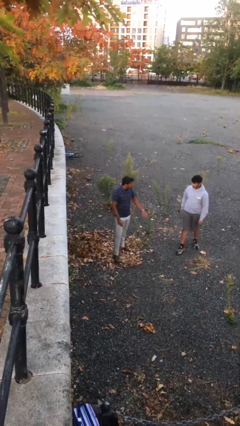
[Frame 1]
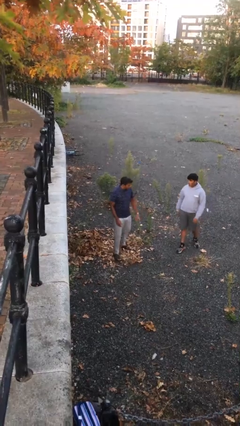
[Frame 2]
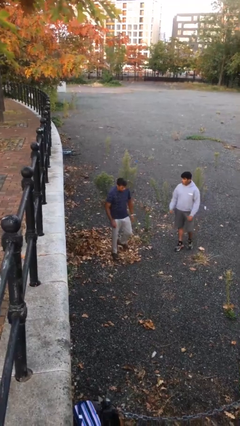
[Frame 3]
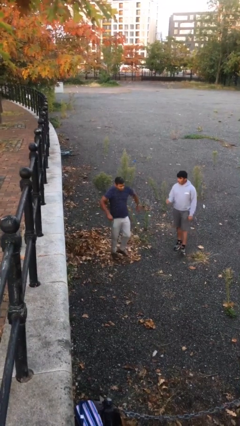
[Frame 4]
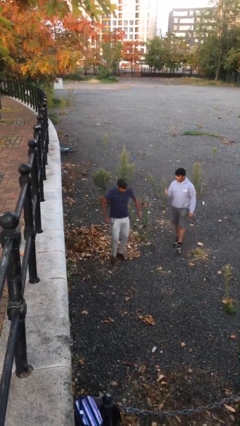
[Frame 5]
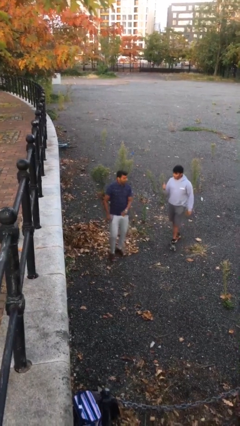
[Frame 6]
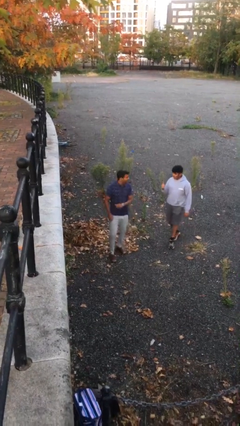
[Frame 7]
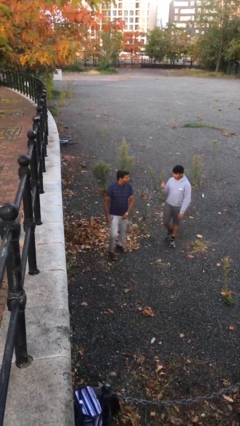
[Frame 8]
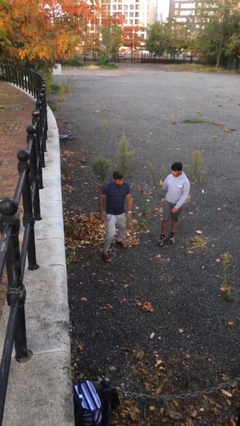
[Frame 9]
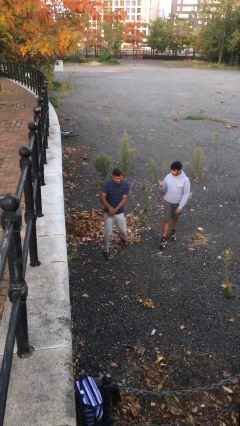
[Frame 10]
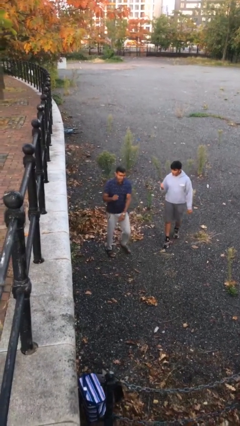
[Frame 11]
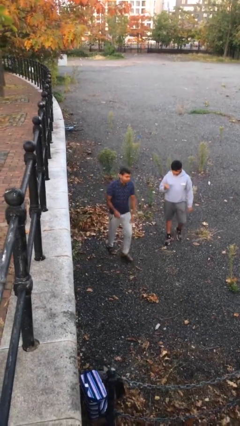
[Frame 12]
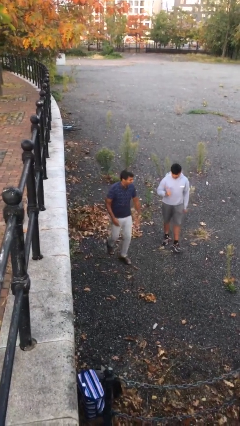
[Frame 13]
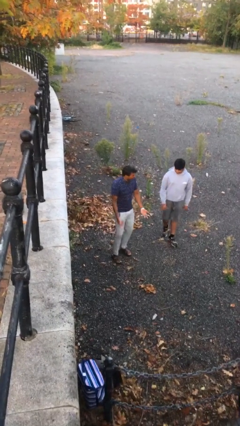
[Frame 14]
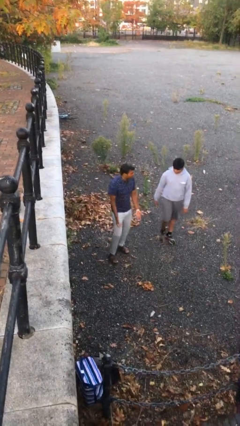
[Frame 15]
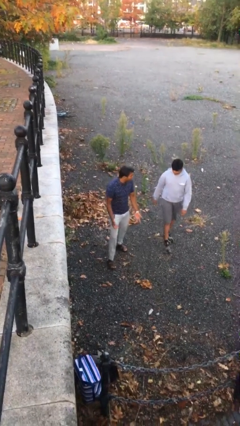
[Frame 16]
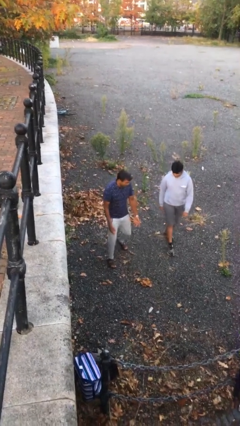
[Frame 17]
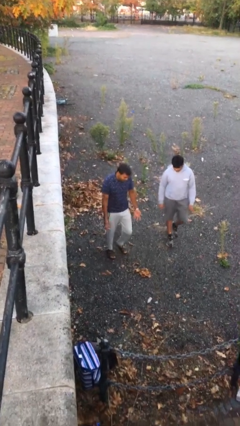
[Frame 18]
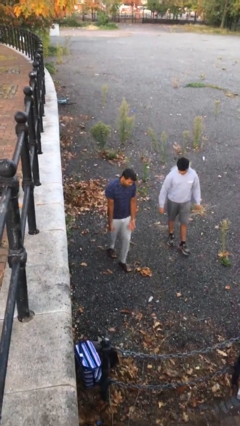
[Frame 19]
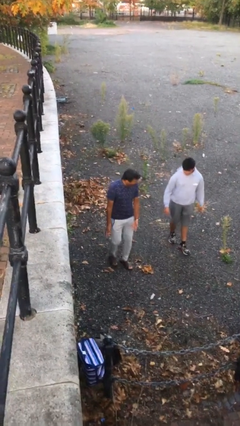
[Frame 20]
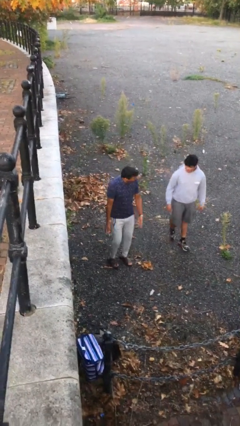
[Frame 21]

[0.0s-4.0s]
person talks to person

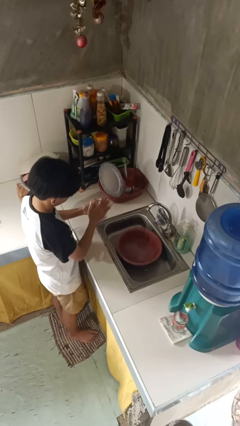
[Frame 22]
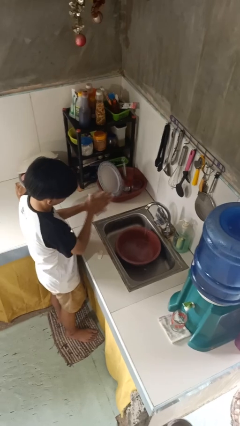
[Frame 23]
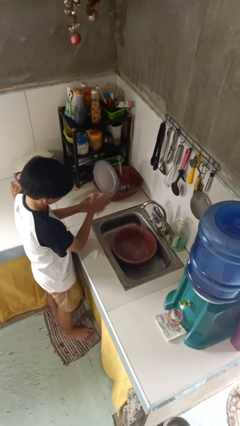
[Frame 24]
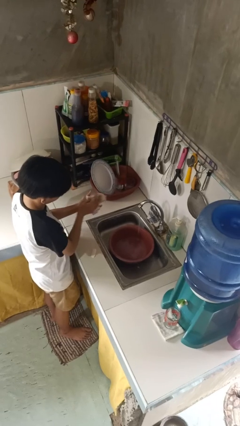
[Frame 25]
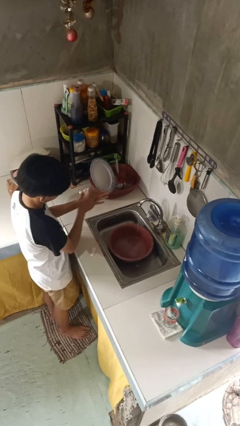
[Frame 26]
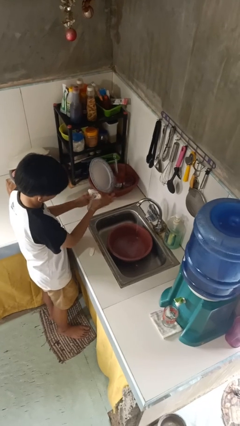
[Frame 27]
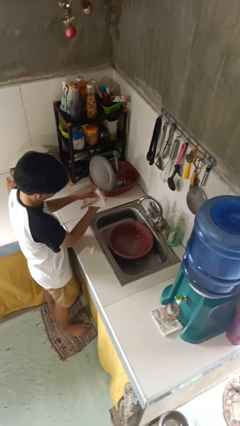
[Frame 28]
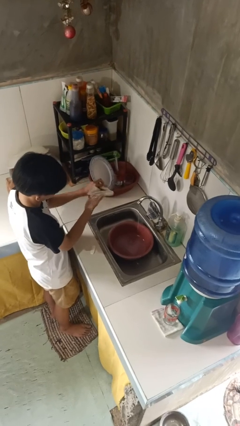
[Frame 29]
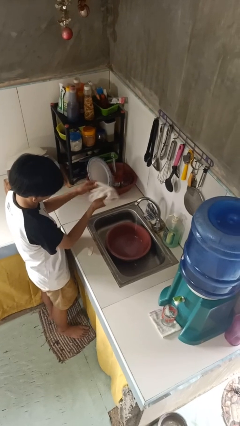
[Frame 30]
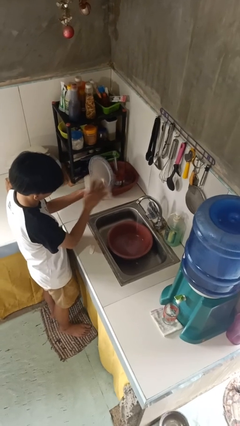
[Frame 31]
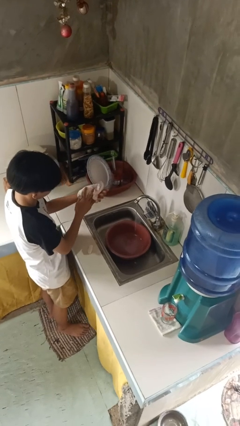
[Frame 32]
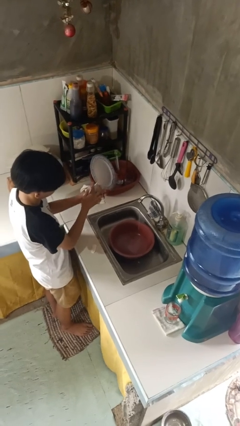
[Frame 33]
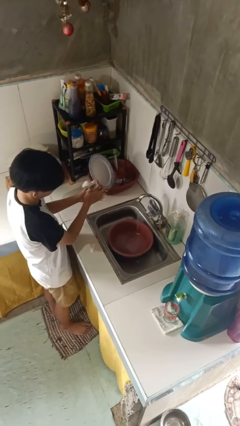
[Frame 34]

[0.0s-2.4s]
person dries hands with towel

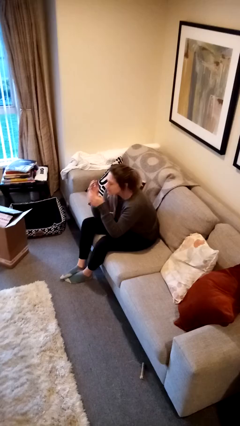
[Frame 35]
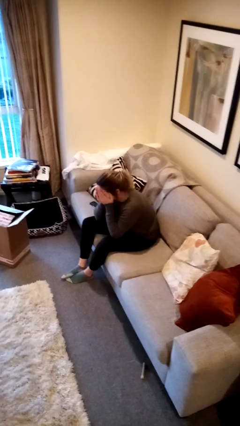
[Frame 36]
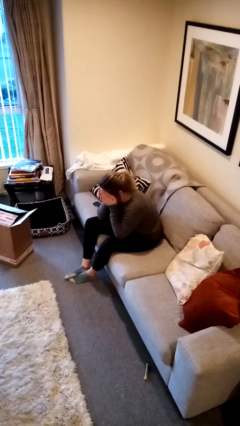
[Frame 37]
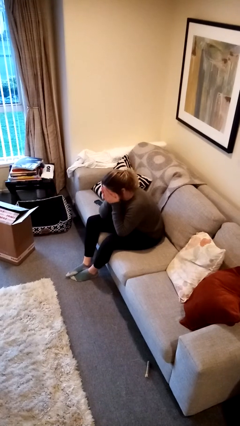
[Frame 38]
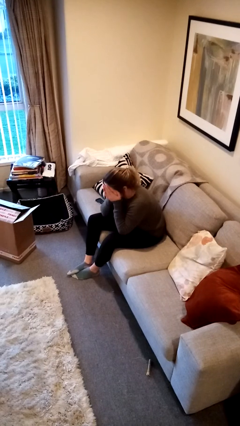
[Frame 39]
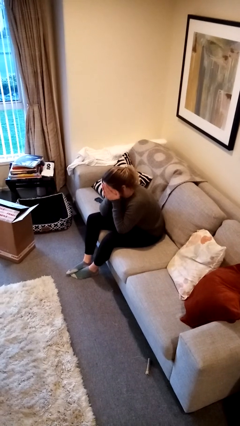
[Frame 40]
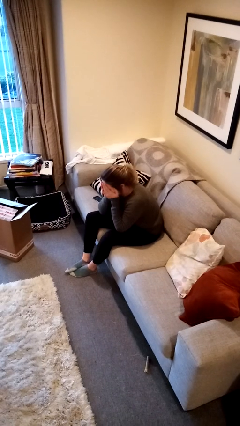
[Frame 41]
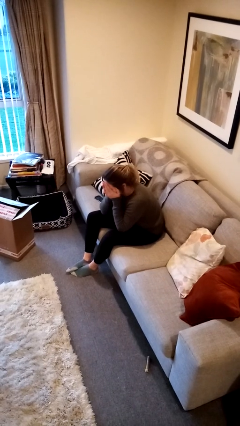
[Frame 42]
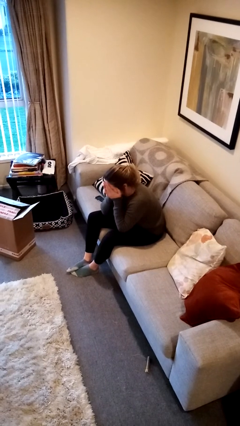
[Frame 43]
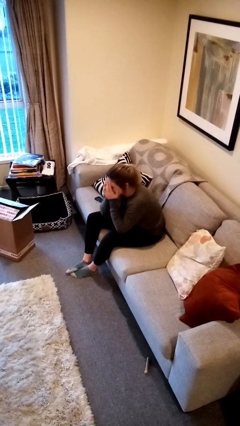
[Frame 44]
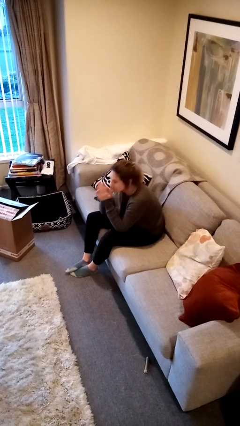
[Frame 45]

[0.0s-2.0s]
person covers face with hands

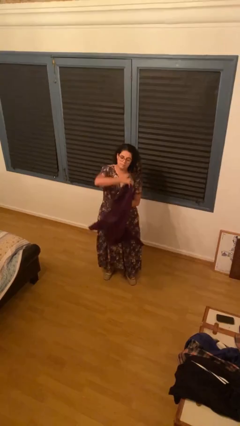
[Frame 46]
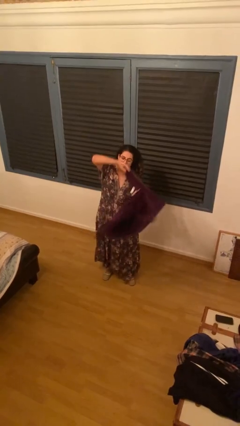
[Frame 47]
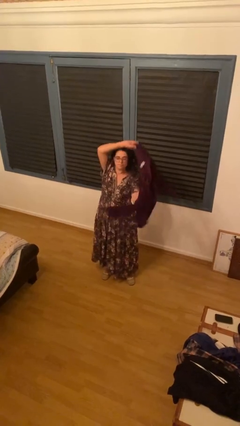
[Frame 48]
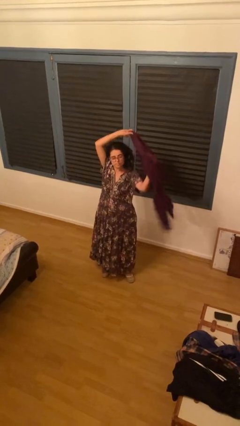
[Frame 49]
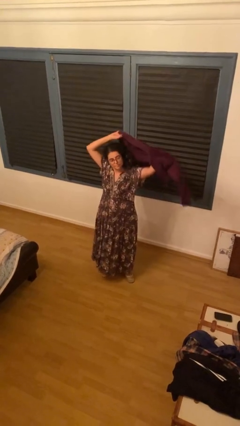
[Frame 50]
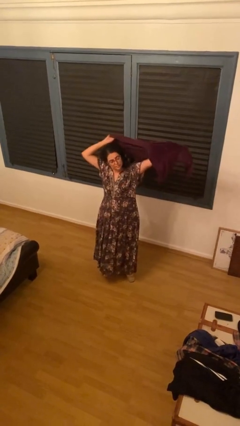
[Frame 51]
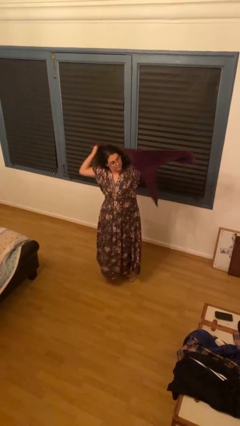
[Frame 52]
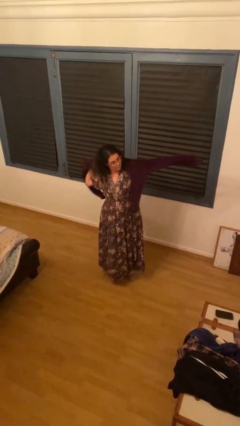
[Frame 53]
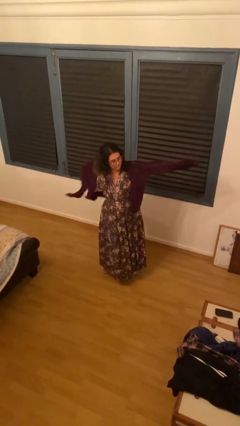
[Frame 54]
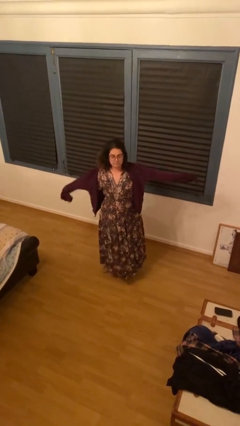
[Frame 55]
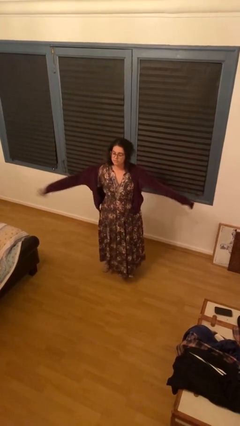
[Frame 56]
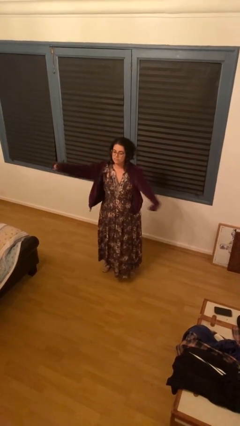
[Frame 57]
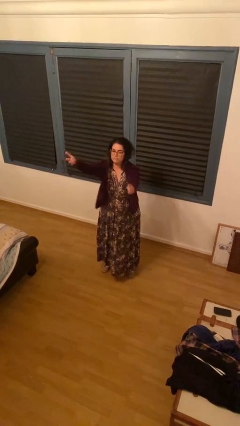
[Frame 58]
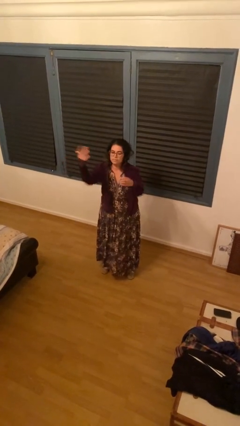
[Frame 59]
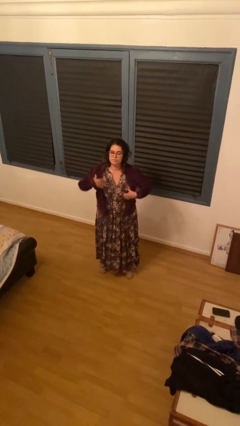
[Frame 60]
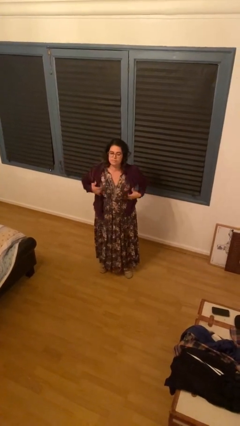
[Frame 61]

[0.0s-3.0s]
person puts on jacket

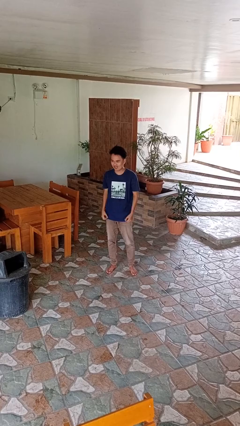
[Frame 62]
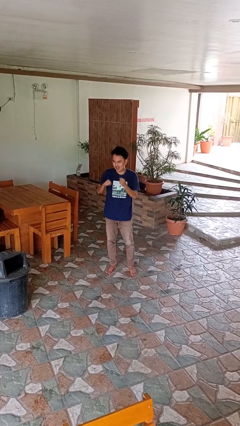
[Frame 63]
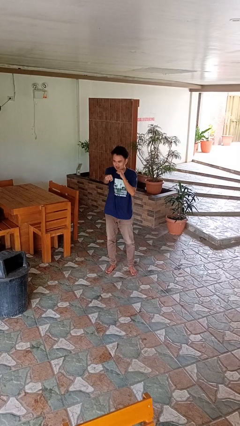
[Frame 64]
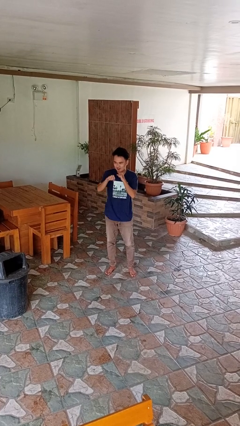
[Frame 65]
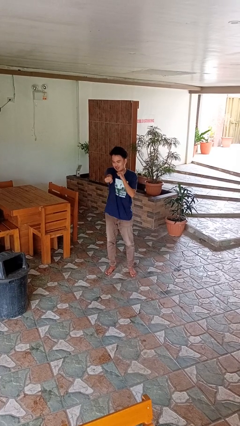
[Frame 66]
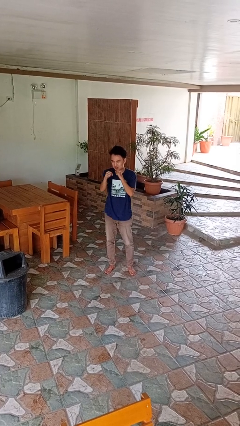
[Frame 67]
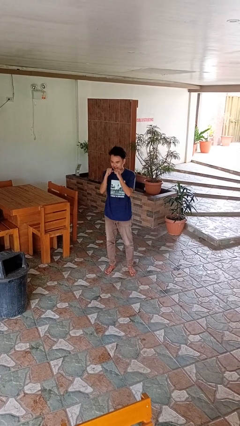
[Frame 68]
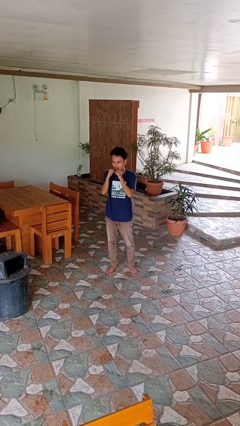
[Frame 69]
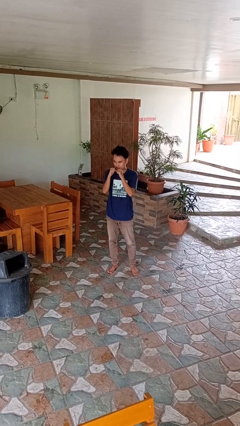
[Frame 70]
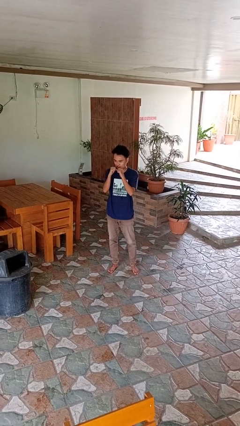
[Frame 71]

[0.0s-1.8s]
person punches

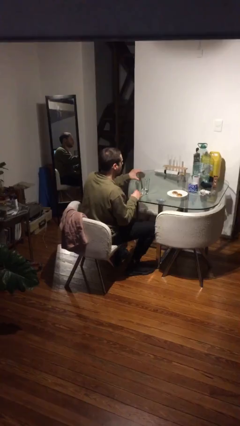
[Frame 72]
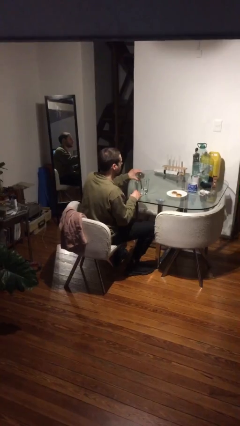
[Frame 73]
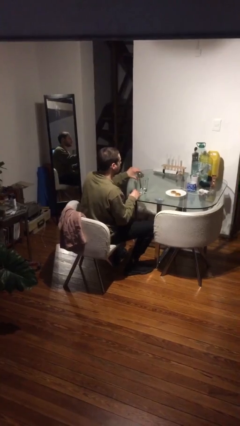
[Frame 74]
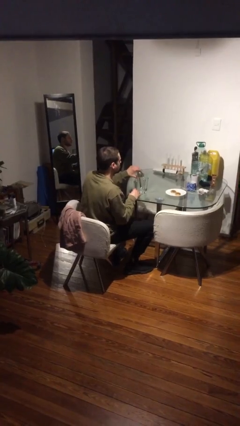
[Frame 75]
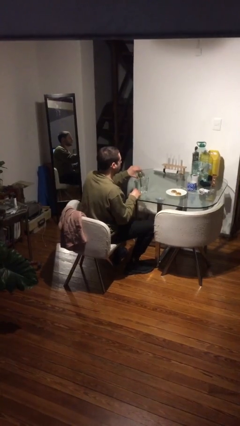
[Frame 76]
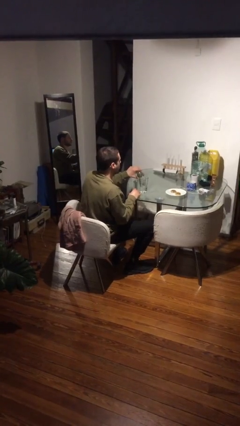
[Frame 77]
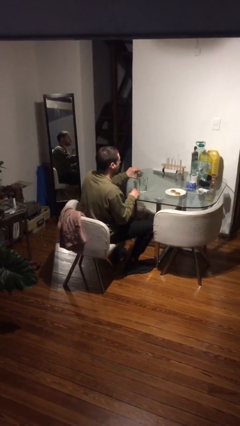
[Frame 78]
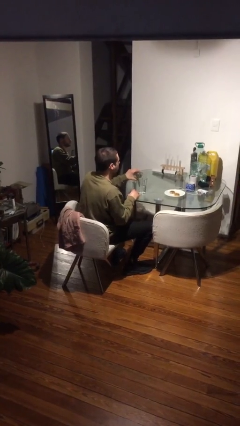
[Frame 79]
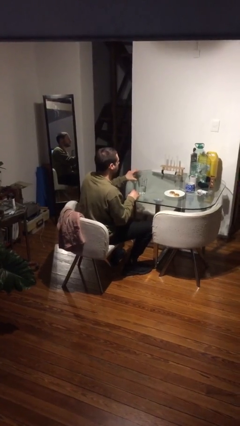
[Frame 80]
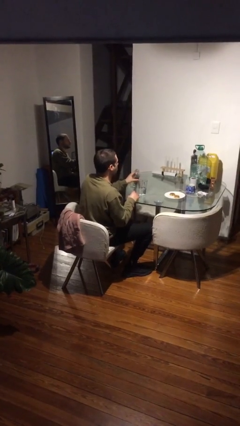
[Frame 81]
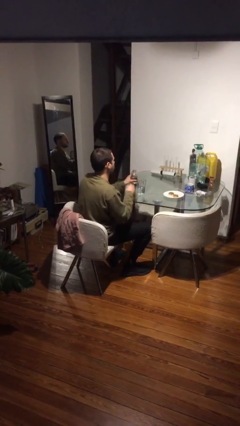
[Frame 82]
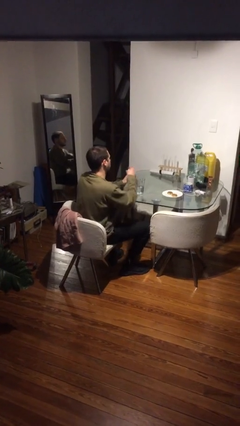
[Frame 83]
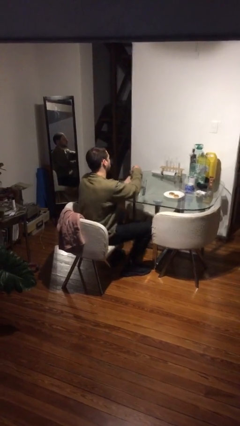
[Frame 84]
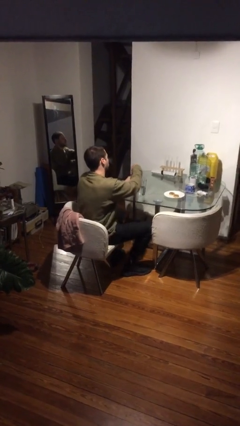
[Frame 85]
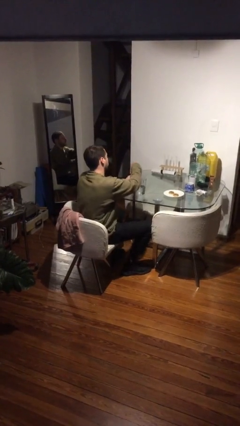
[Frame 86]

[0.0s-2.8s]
person pours liquid into cup

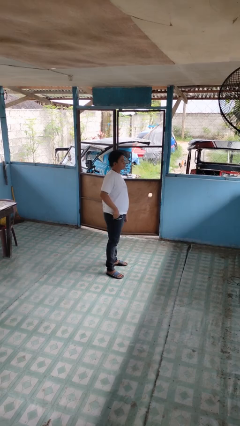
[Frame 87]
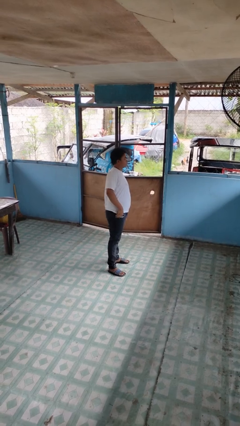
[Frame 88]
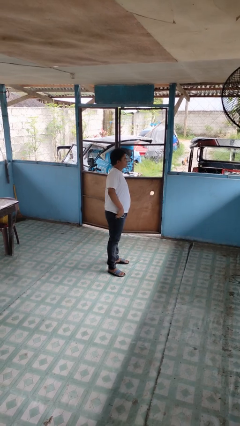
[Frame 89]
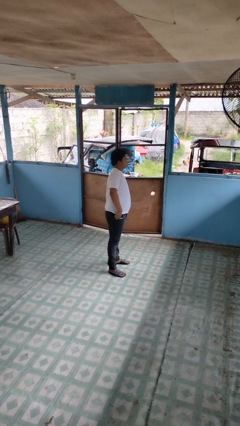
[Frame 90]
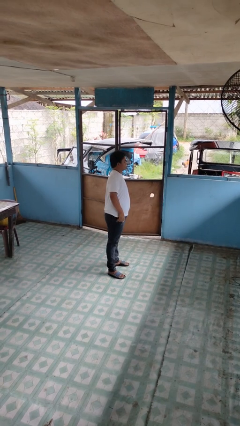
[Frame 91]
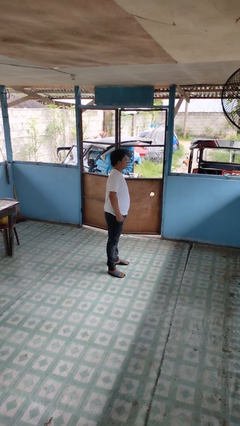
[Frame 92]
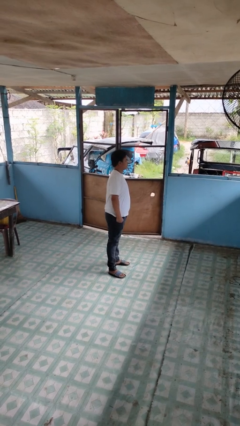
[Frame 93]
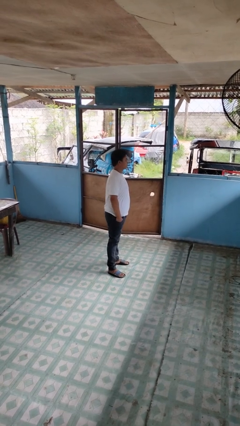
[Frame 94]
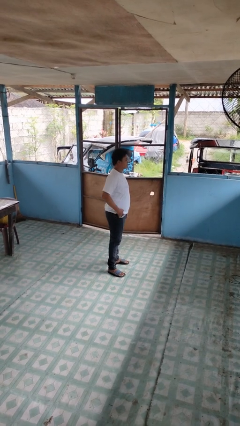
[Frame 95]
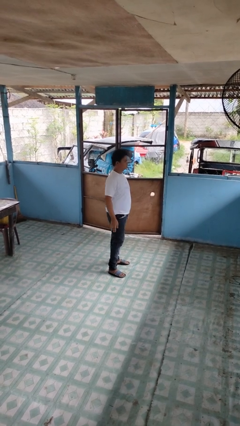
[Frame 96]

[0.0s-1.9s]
person puts hands in back pockets
